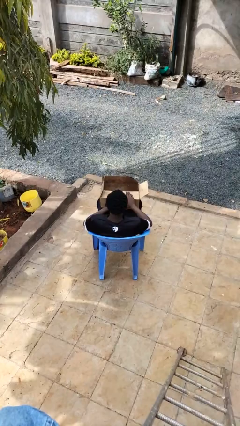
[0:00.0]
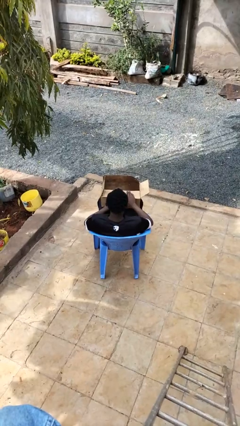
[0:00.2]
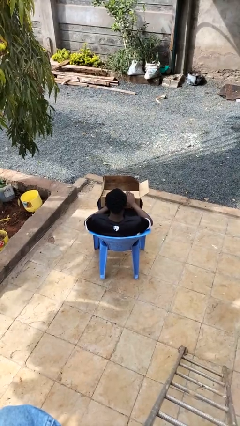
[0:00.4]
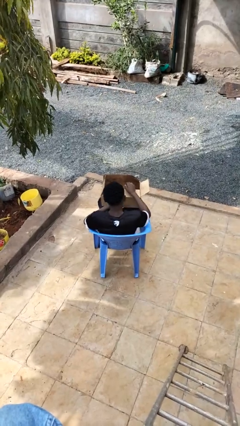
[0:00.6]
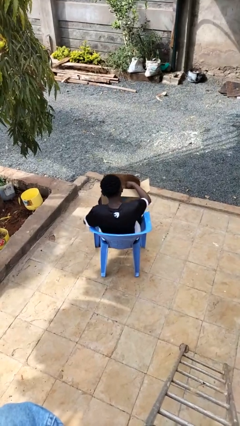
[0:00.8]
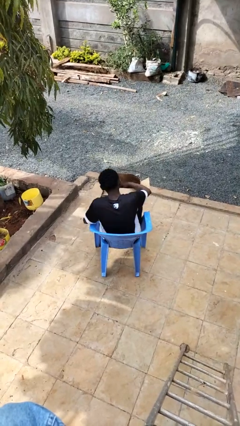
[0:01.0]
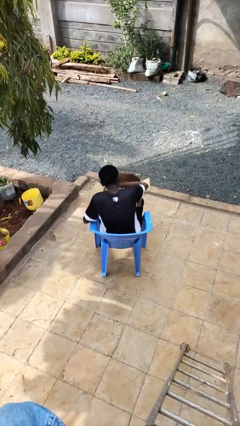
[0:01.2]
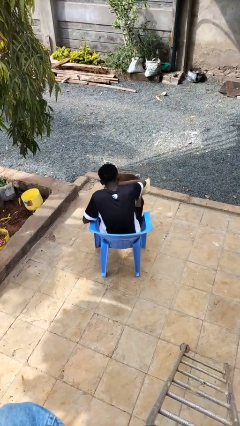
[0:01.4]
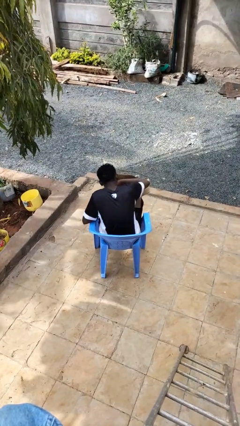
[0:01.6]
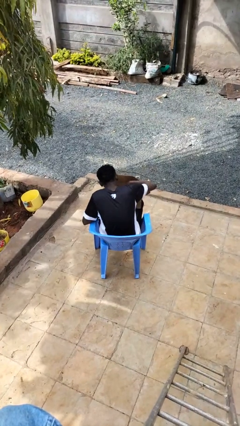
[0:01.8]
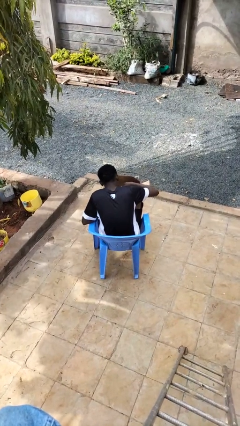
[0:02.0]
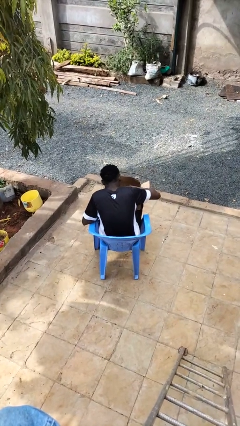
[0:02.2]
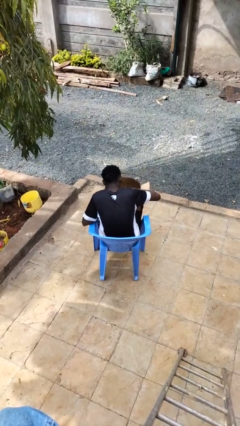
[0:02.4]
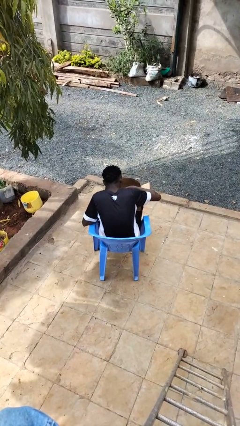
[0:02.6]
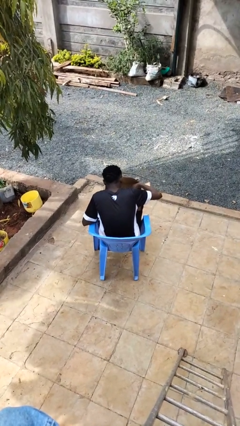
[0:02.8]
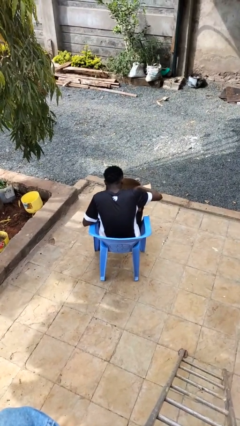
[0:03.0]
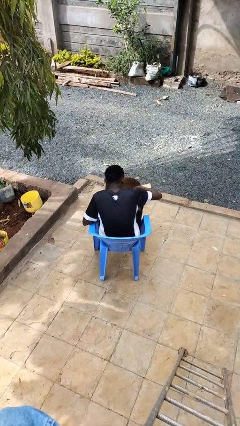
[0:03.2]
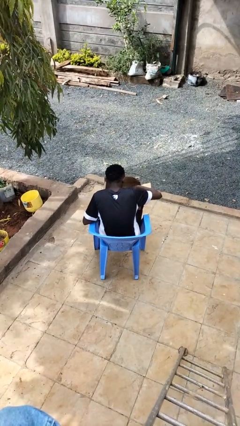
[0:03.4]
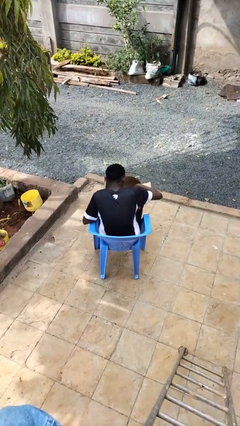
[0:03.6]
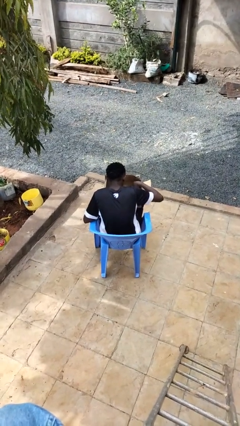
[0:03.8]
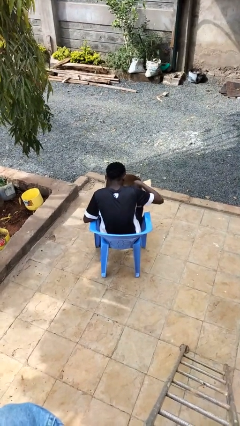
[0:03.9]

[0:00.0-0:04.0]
person searches in box

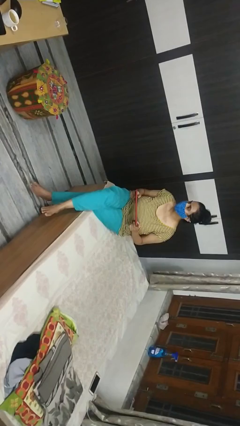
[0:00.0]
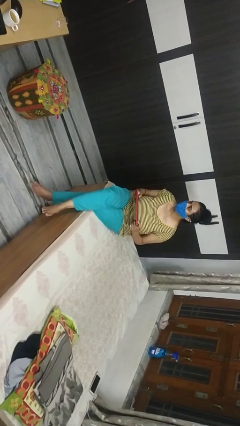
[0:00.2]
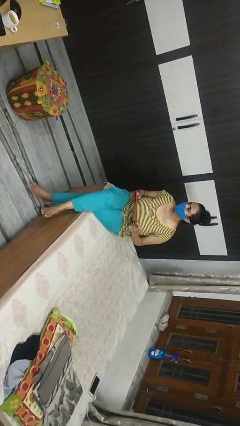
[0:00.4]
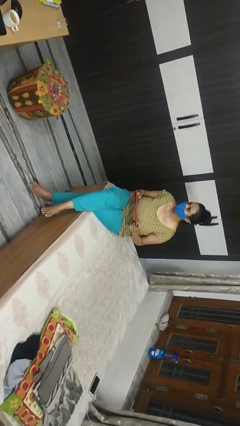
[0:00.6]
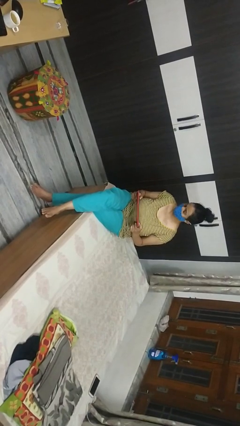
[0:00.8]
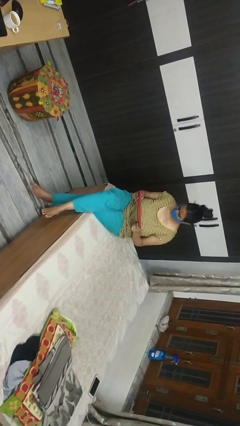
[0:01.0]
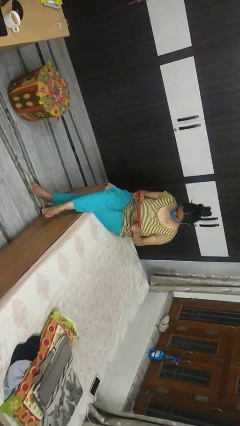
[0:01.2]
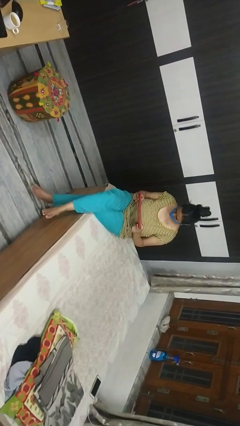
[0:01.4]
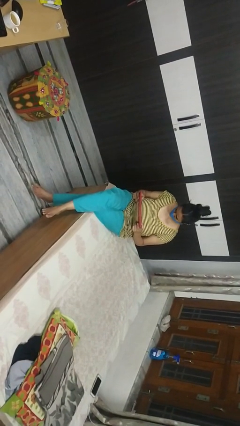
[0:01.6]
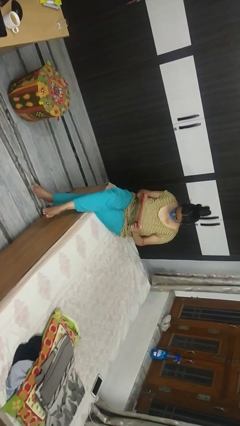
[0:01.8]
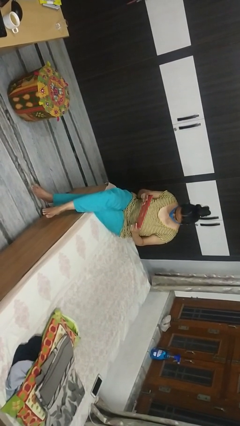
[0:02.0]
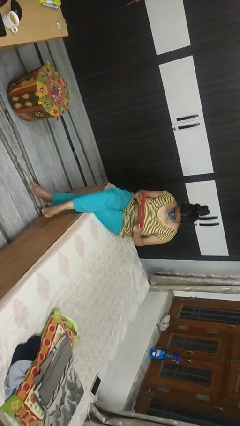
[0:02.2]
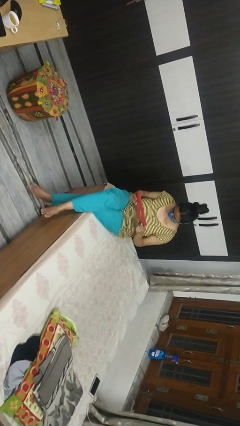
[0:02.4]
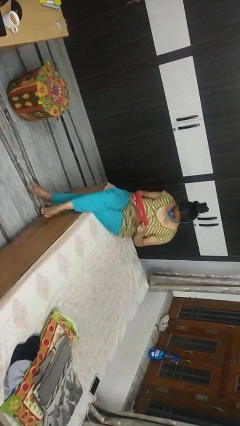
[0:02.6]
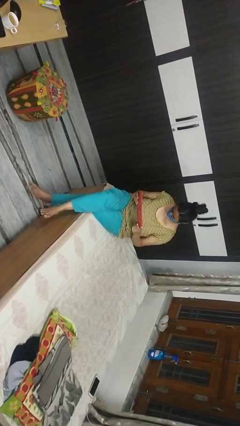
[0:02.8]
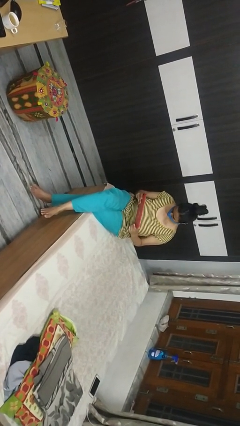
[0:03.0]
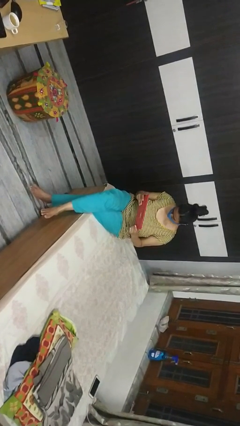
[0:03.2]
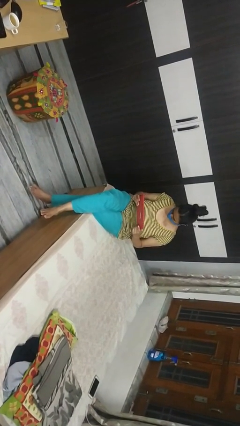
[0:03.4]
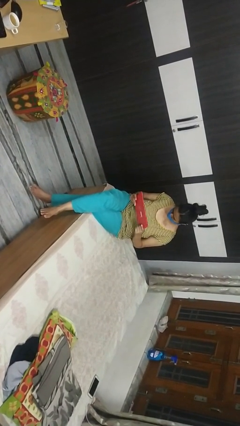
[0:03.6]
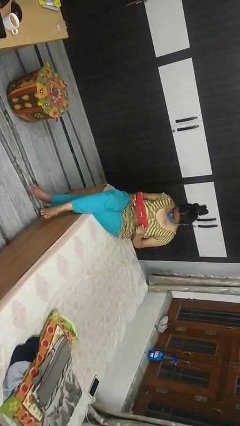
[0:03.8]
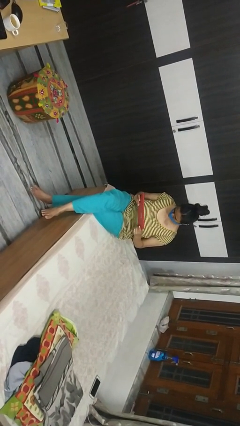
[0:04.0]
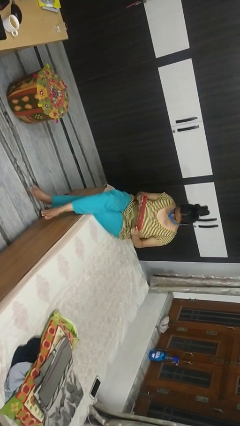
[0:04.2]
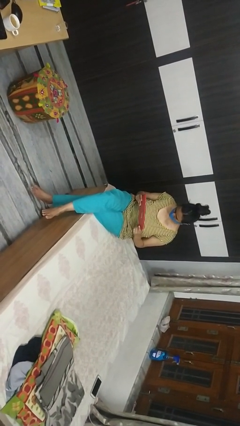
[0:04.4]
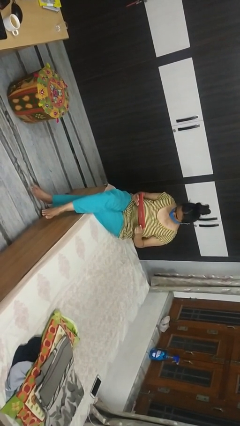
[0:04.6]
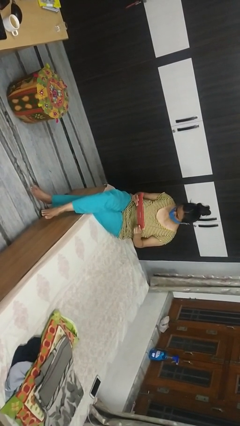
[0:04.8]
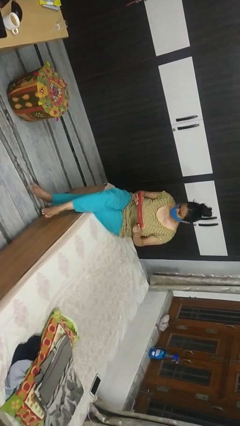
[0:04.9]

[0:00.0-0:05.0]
person interacts with handheld game

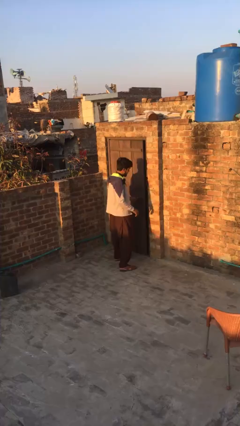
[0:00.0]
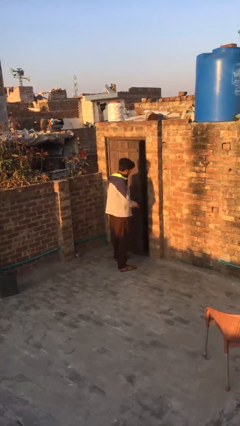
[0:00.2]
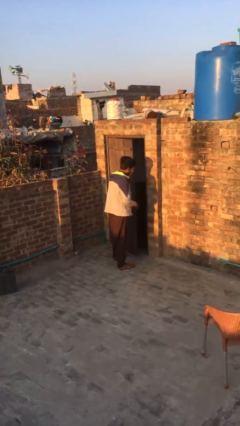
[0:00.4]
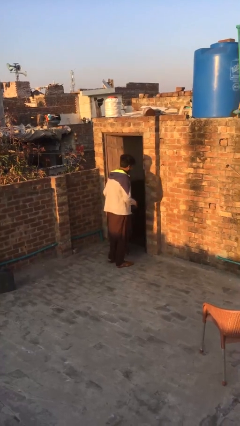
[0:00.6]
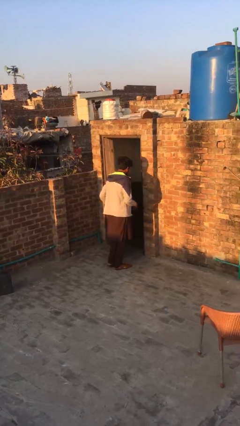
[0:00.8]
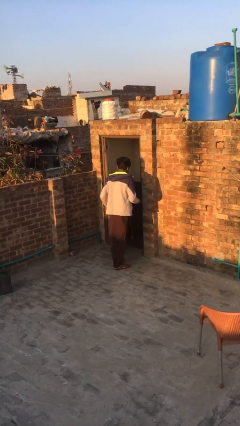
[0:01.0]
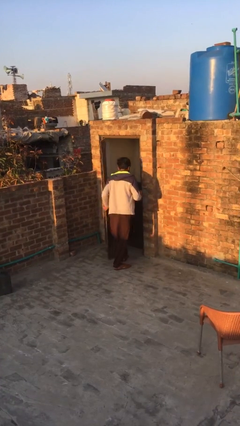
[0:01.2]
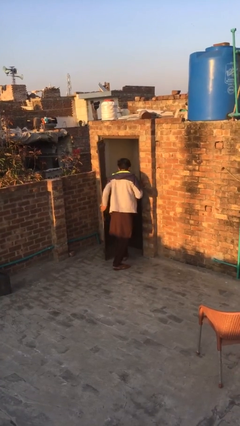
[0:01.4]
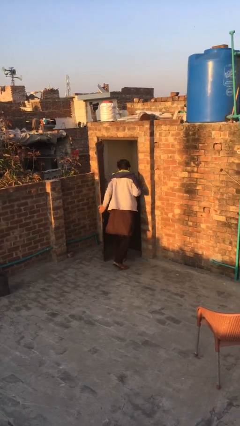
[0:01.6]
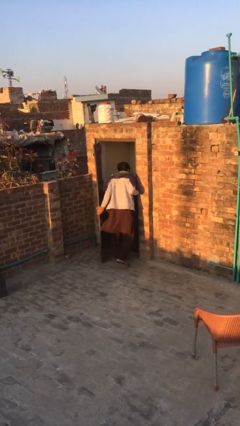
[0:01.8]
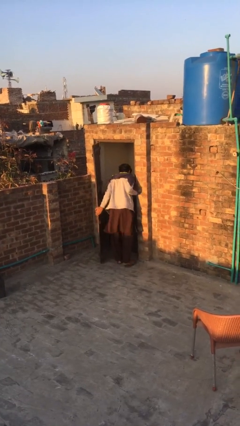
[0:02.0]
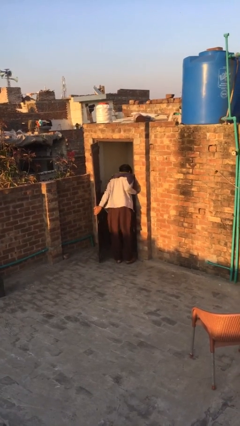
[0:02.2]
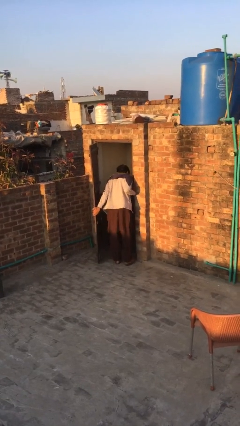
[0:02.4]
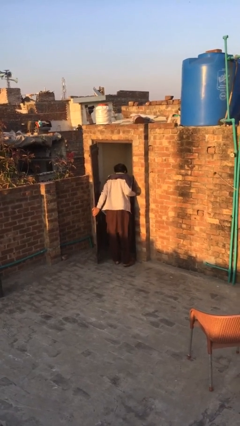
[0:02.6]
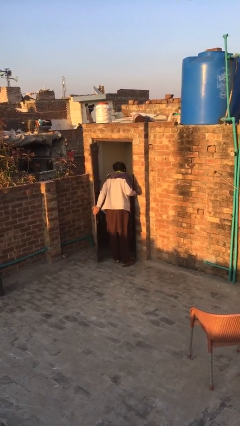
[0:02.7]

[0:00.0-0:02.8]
person opens facility door

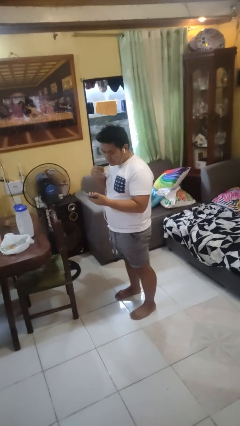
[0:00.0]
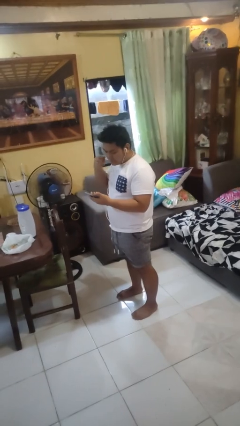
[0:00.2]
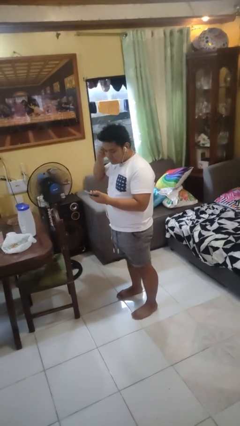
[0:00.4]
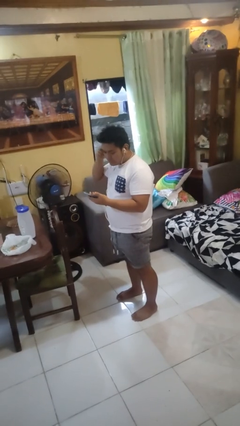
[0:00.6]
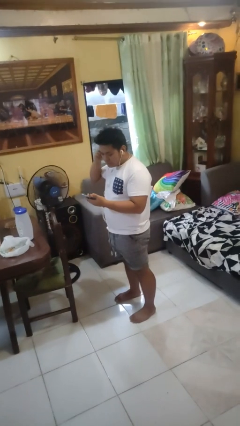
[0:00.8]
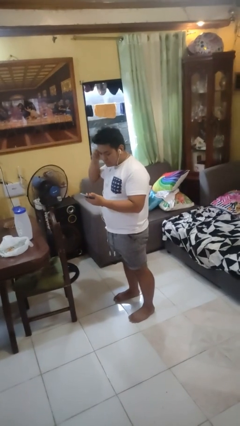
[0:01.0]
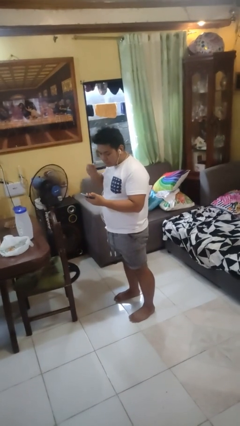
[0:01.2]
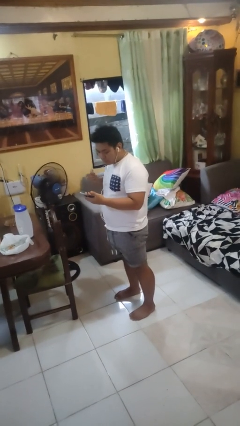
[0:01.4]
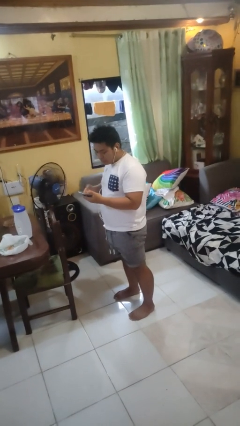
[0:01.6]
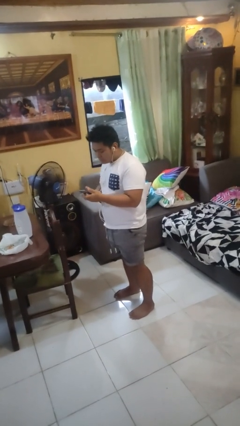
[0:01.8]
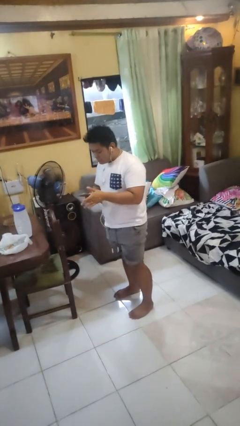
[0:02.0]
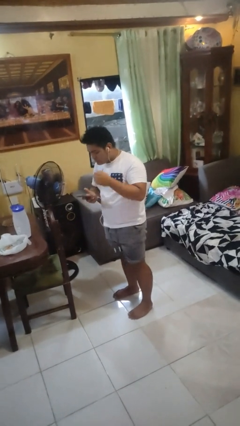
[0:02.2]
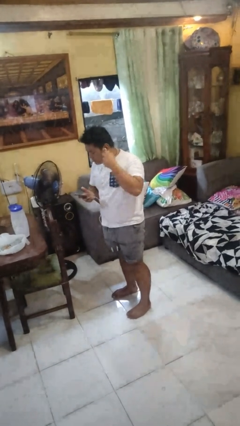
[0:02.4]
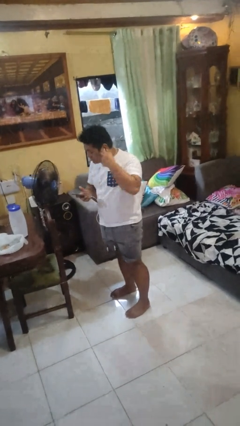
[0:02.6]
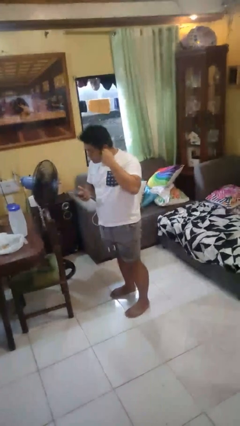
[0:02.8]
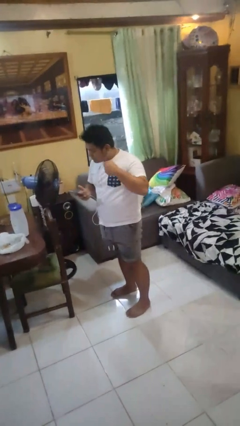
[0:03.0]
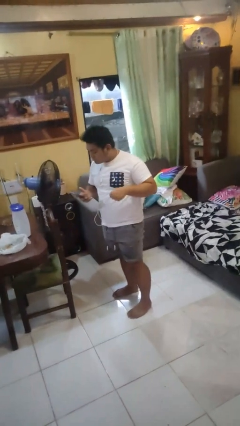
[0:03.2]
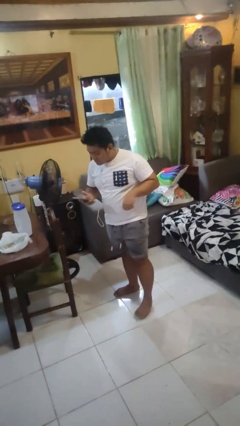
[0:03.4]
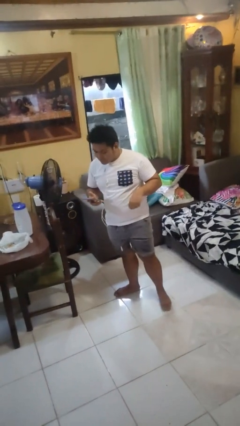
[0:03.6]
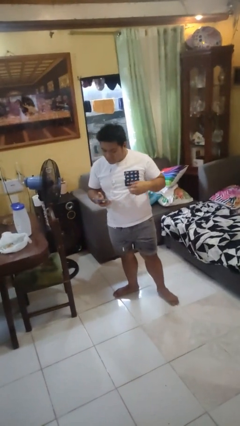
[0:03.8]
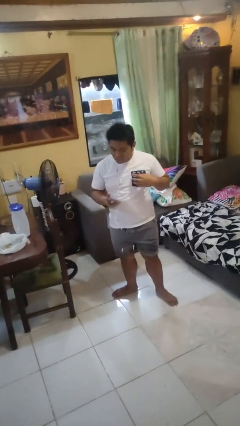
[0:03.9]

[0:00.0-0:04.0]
person takes off headphones

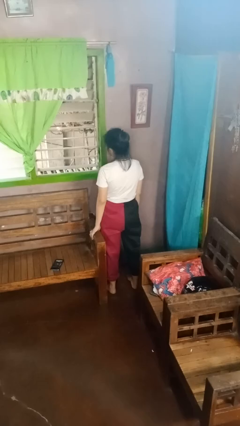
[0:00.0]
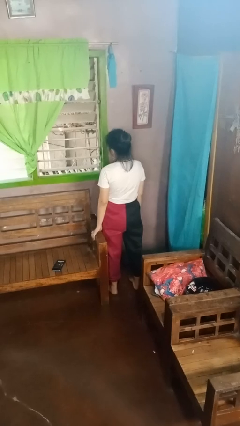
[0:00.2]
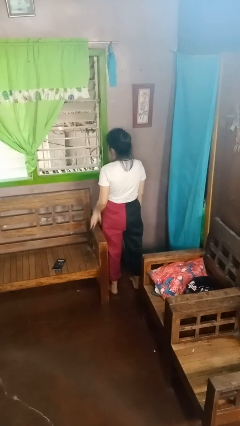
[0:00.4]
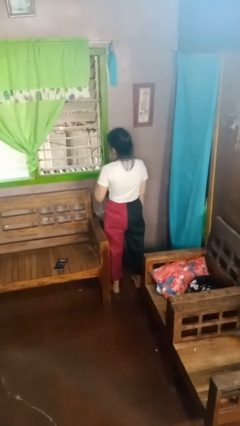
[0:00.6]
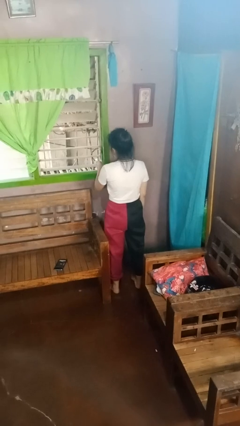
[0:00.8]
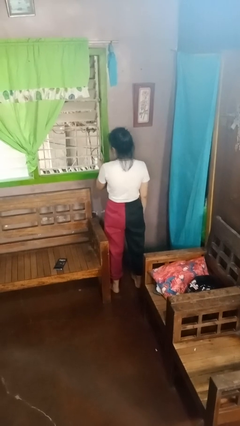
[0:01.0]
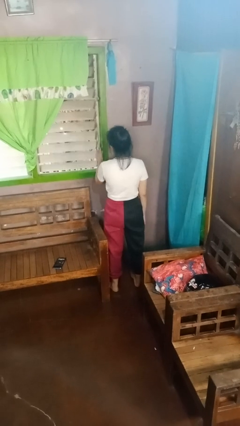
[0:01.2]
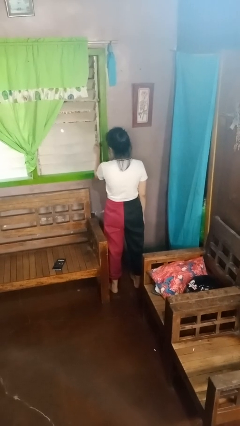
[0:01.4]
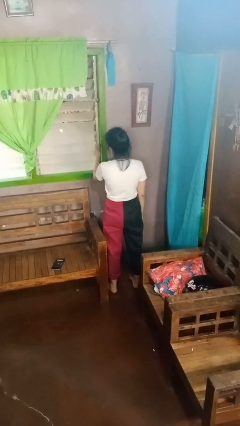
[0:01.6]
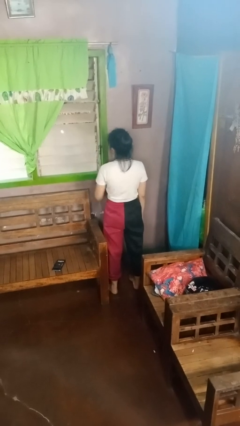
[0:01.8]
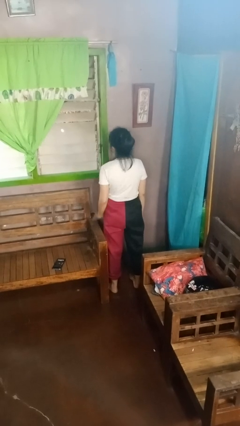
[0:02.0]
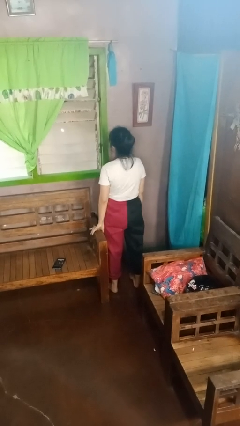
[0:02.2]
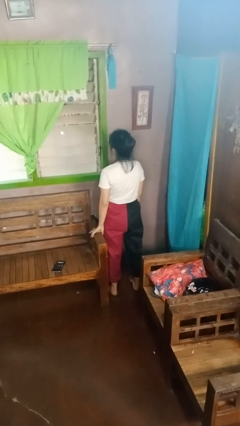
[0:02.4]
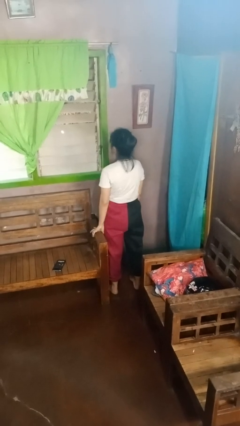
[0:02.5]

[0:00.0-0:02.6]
person closes home window
